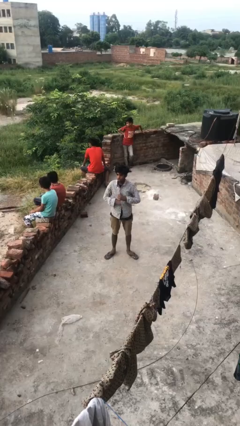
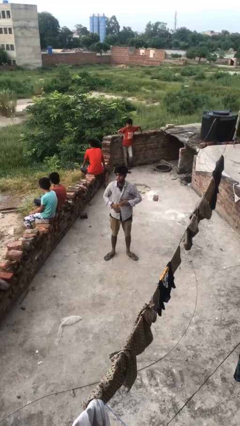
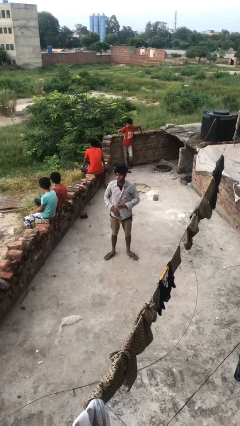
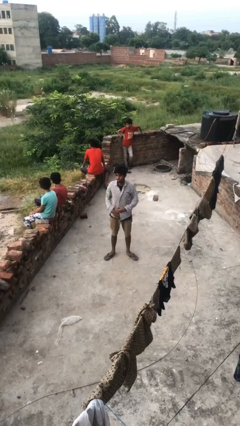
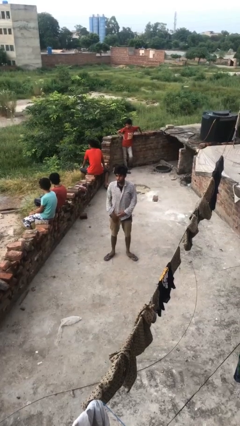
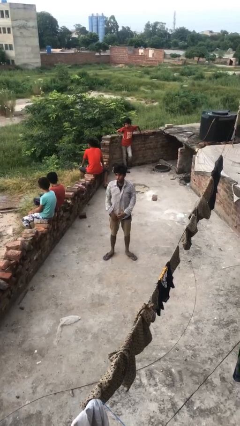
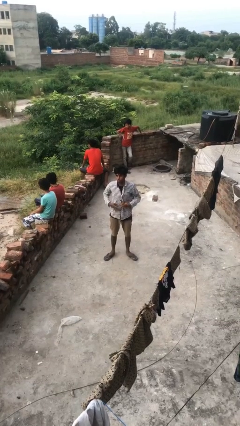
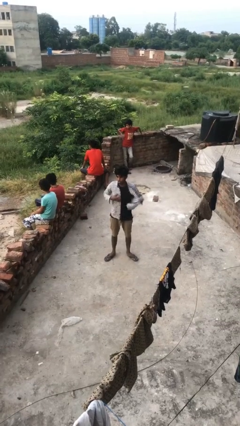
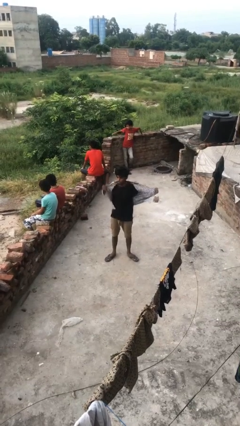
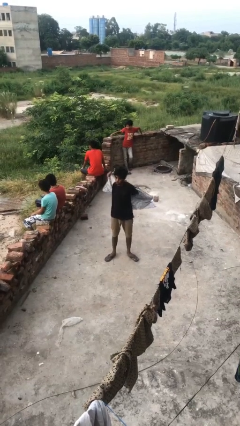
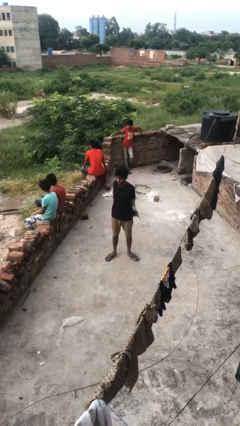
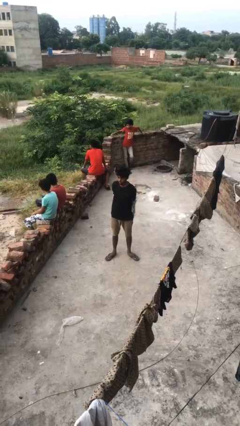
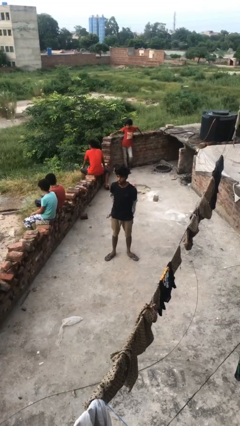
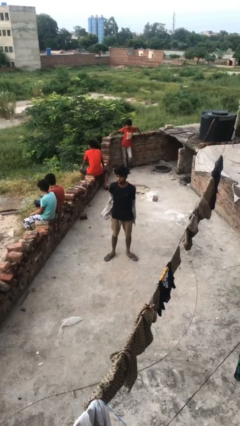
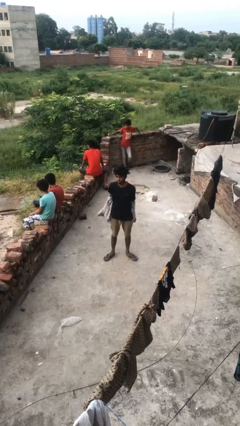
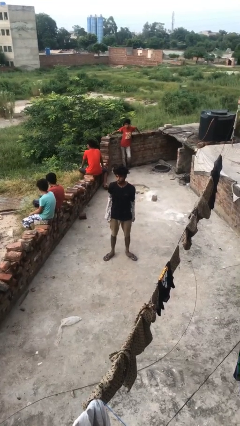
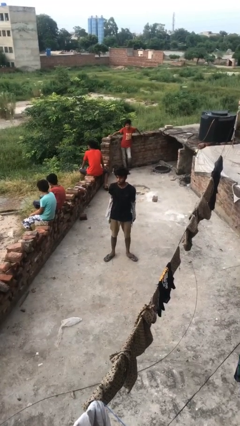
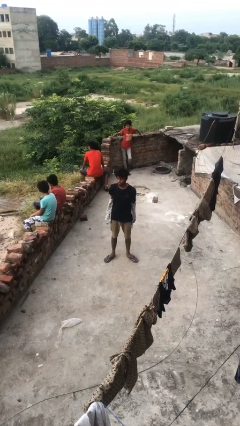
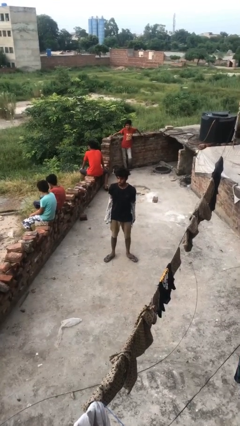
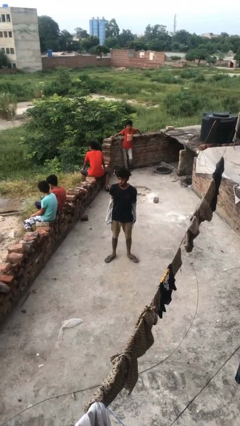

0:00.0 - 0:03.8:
person takes off shirt

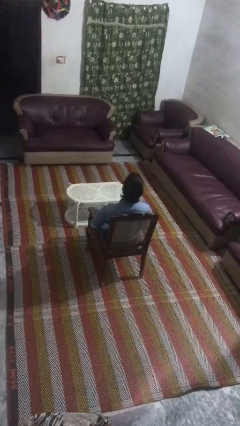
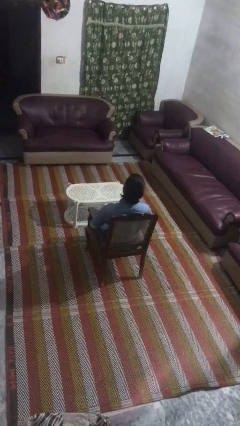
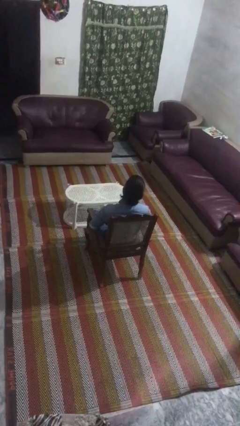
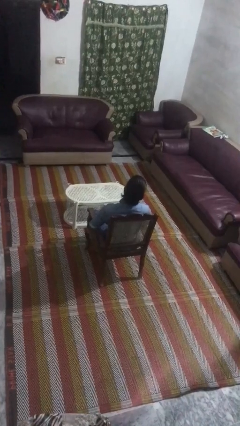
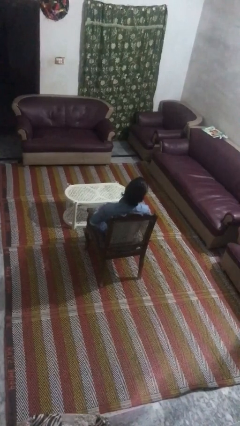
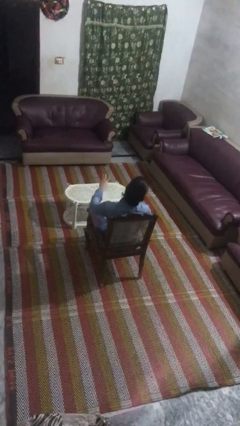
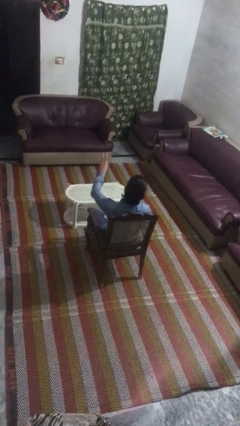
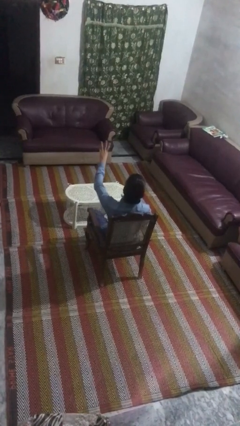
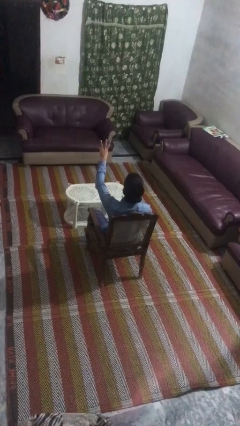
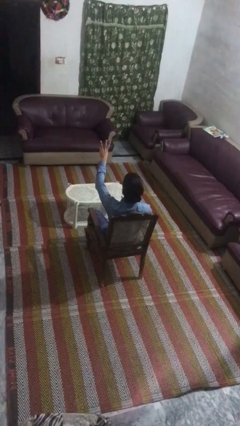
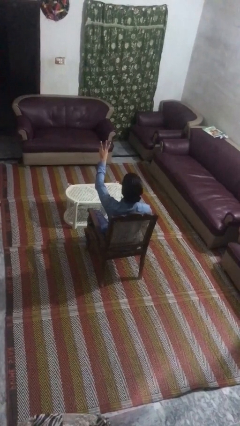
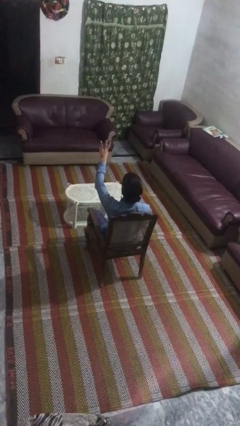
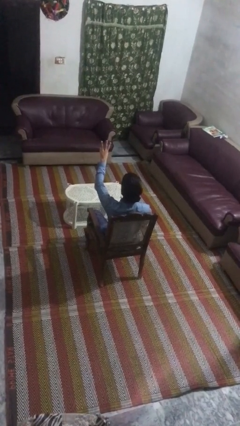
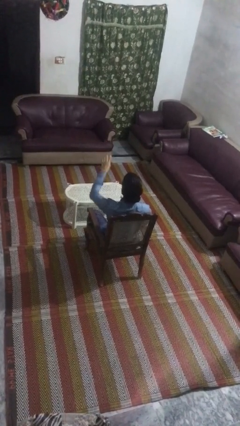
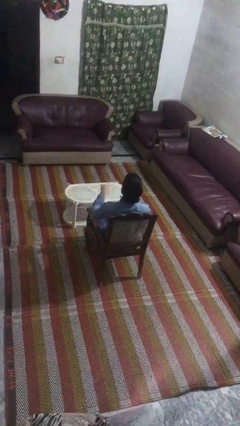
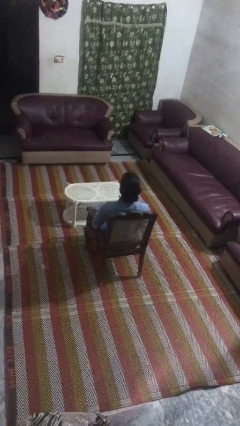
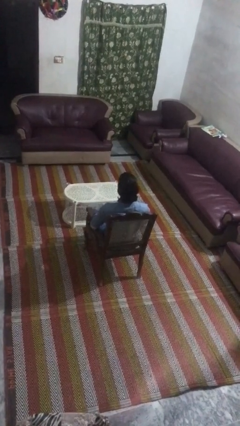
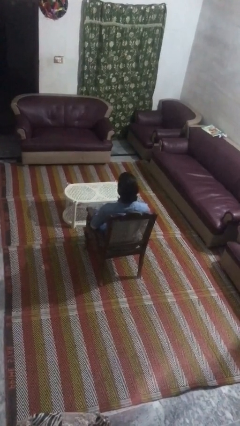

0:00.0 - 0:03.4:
person gestures number three

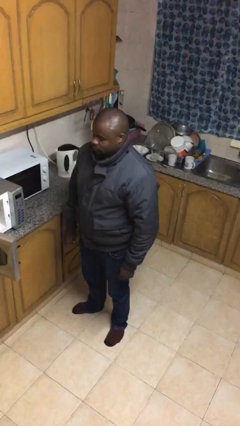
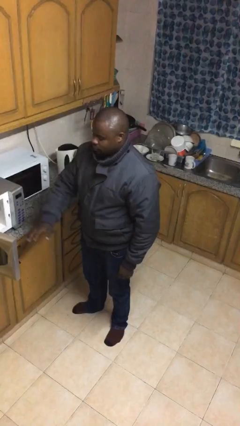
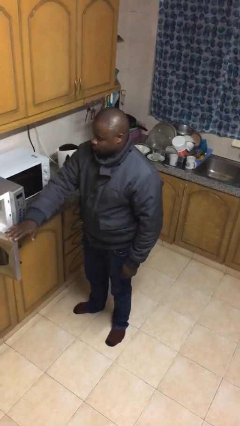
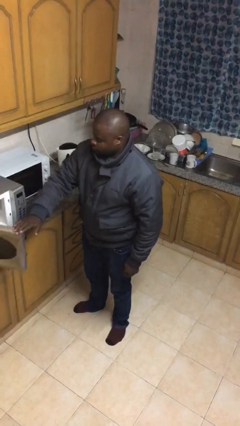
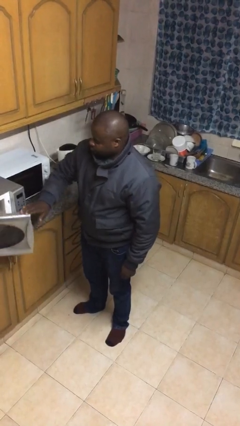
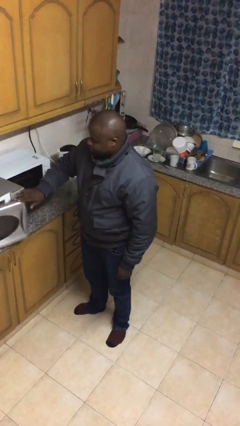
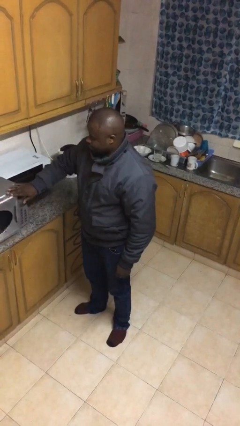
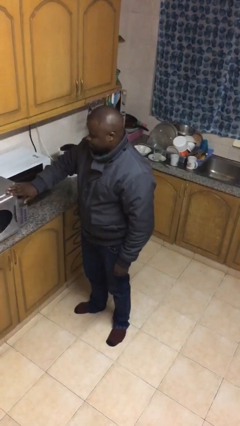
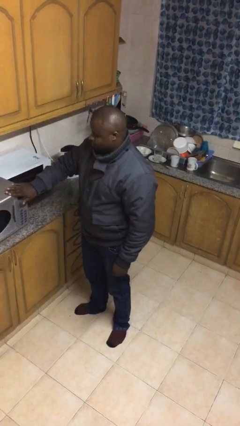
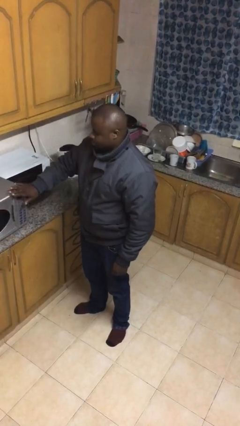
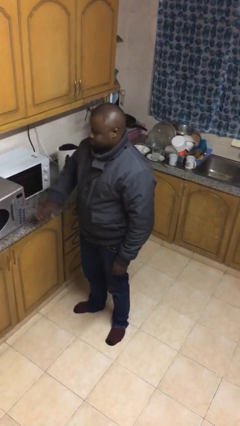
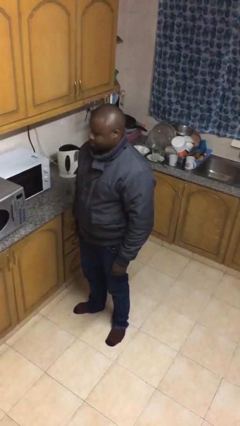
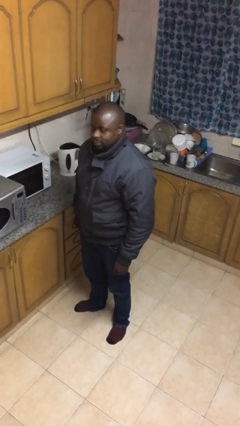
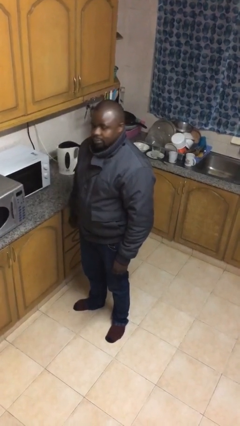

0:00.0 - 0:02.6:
person closes microwave

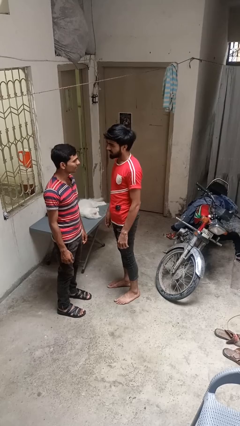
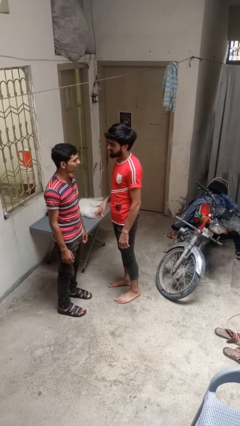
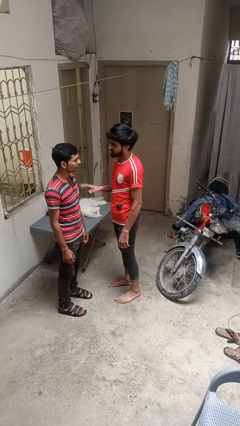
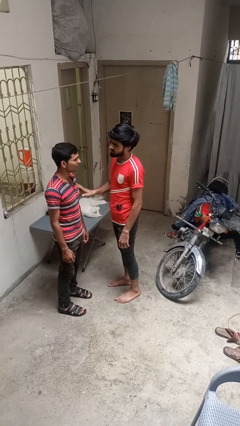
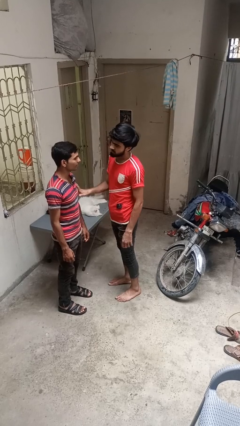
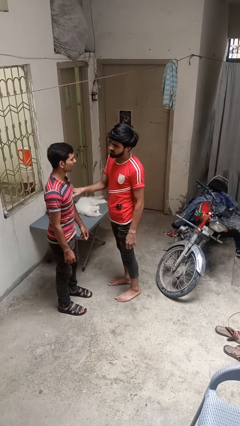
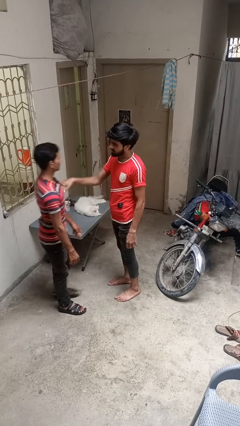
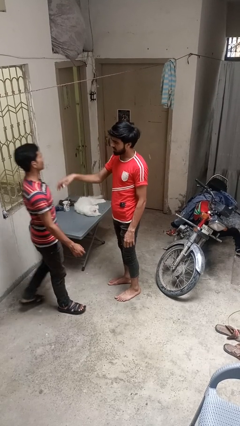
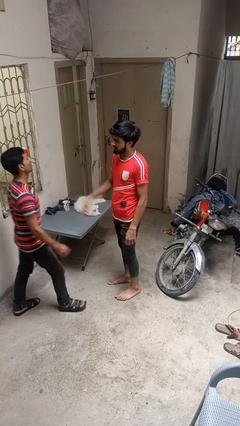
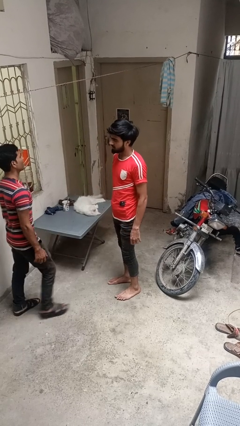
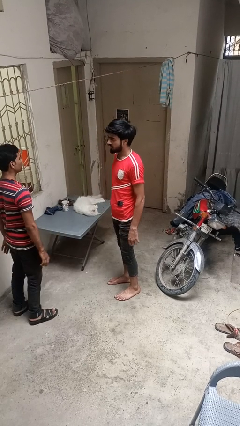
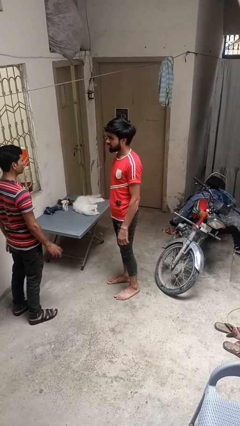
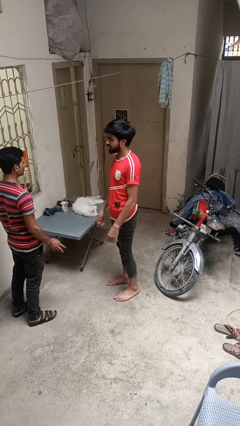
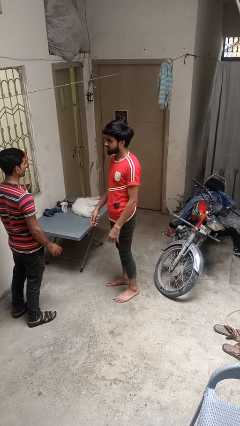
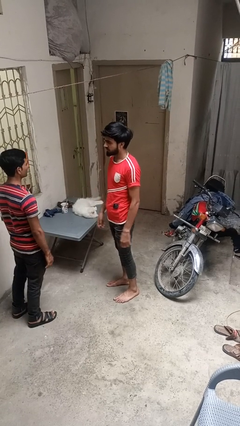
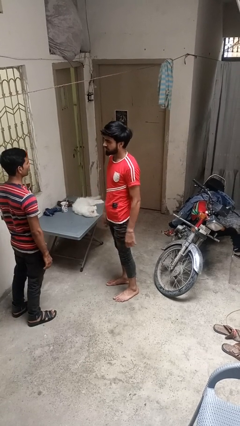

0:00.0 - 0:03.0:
person shoves person

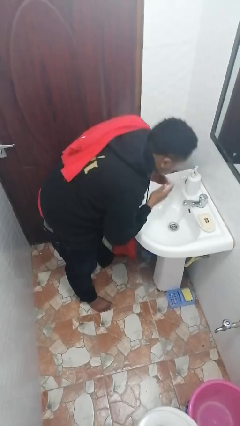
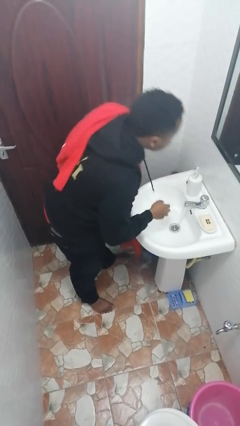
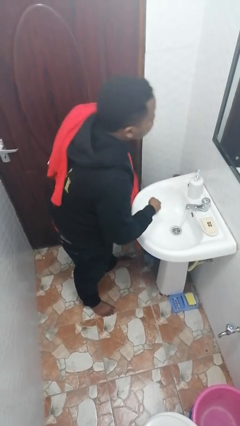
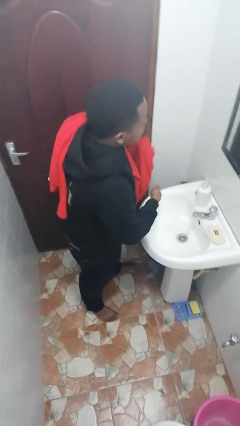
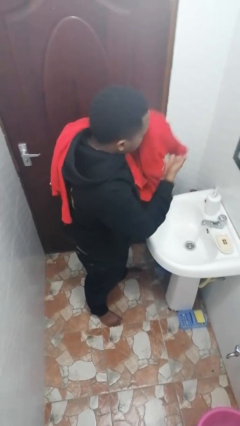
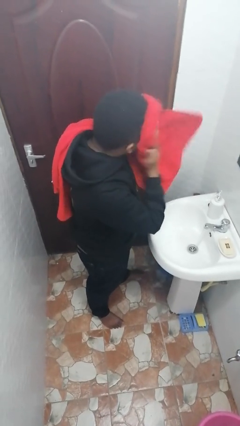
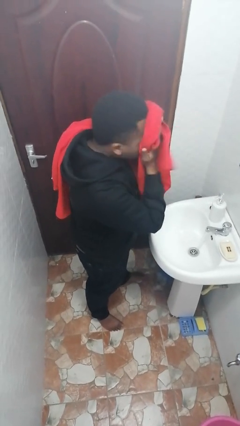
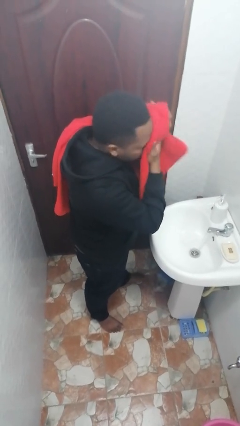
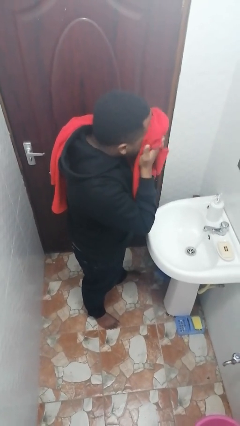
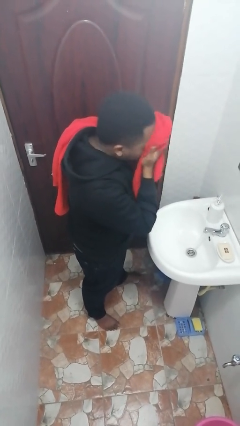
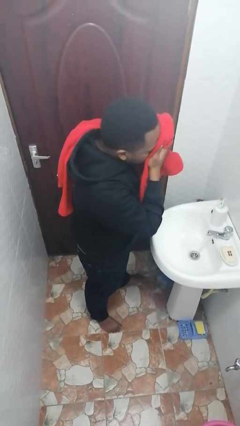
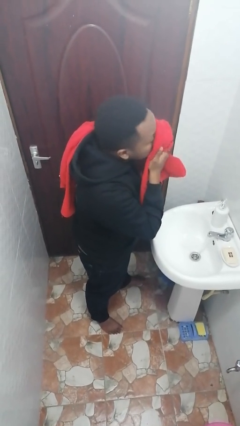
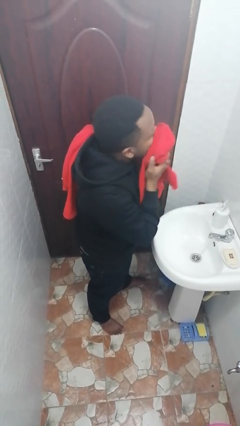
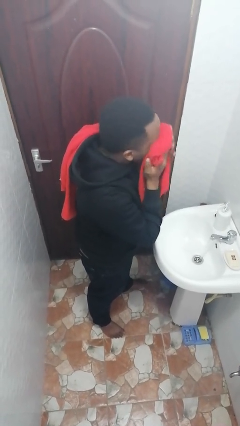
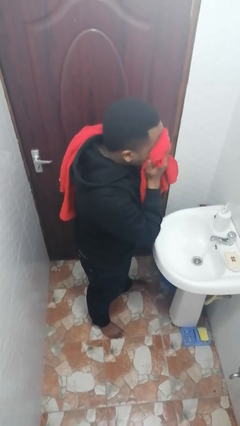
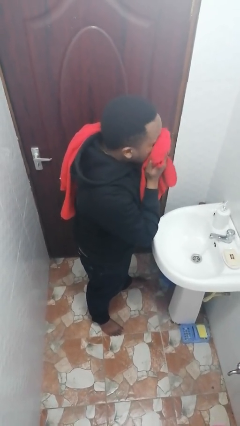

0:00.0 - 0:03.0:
person dries face with towel

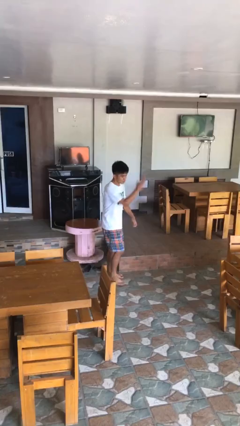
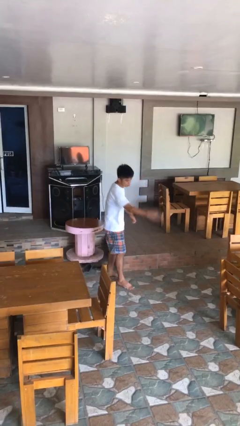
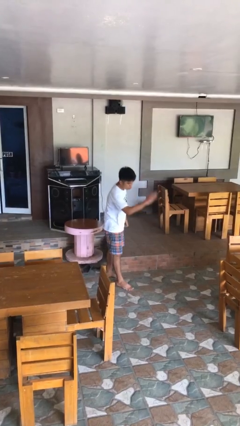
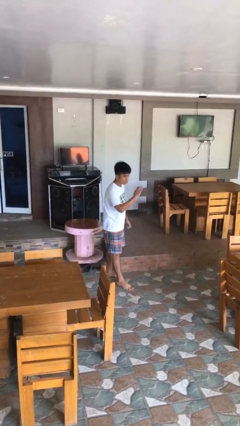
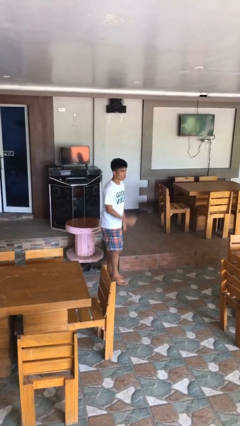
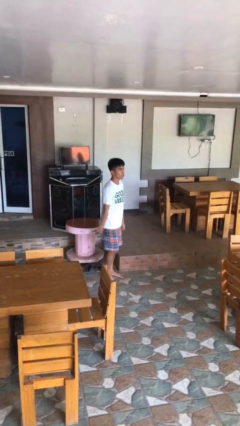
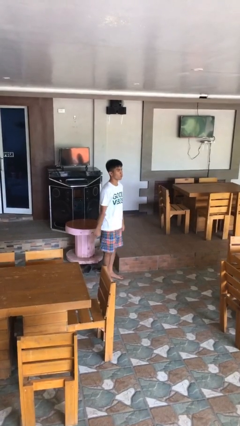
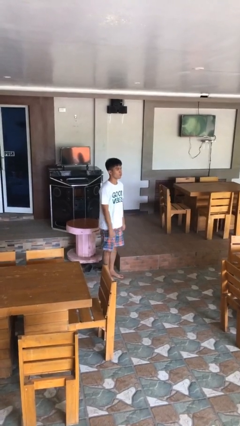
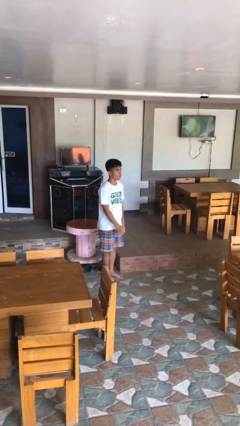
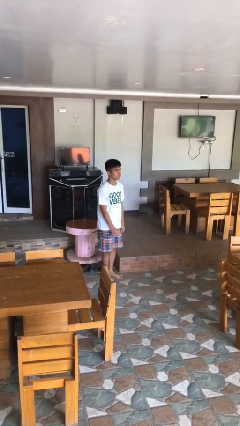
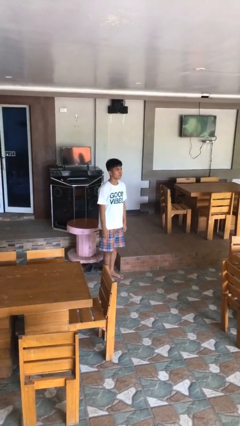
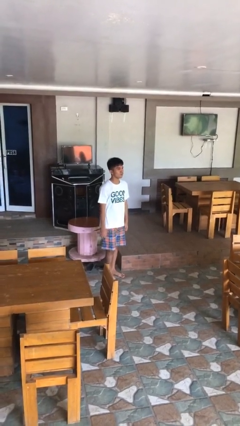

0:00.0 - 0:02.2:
person karate chop
